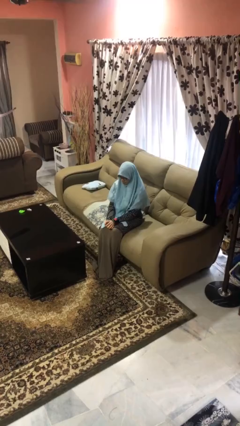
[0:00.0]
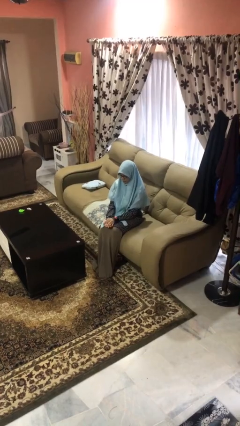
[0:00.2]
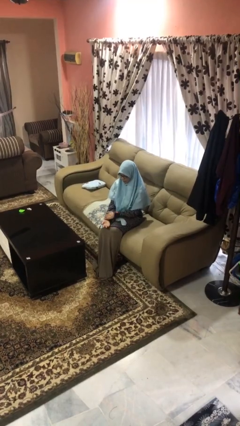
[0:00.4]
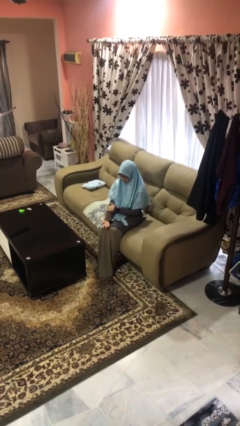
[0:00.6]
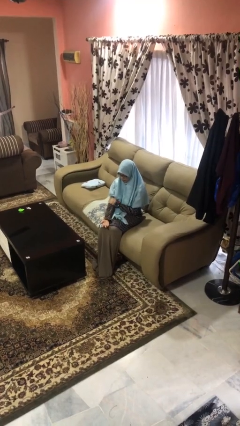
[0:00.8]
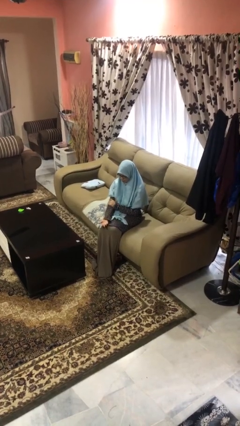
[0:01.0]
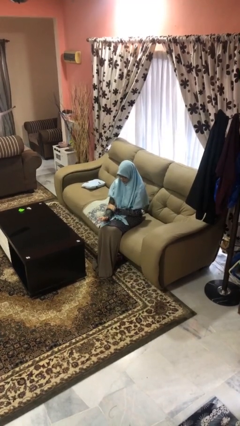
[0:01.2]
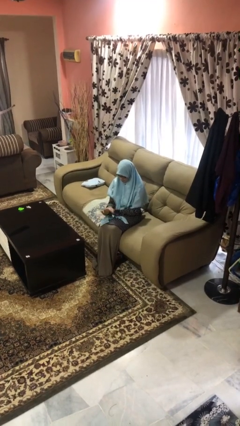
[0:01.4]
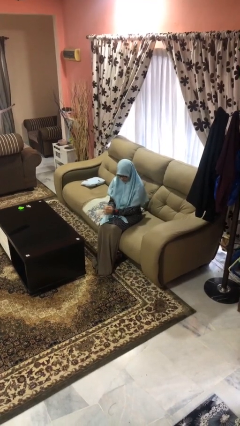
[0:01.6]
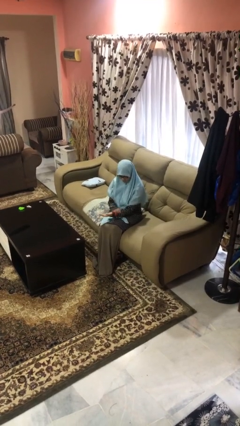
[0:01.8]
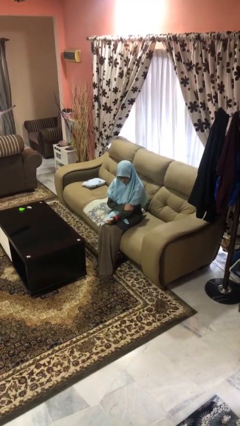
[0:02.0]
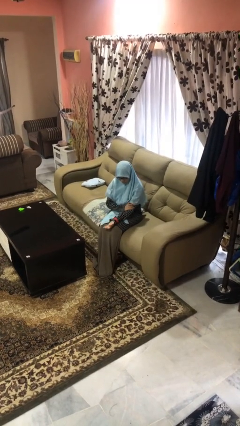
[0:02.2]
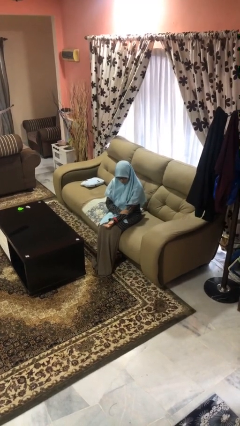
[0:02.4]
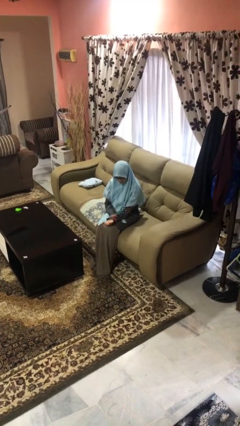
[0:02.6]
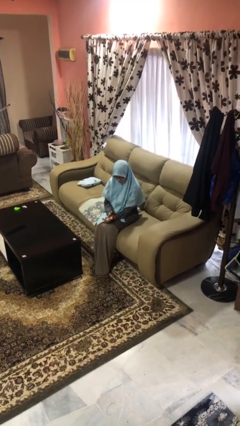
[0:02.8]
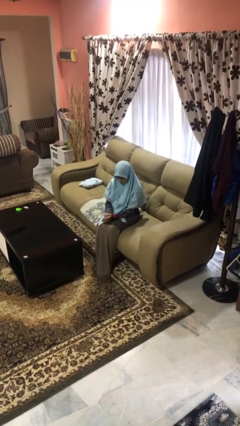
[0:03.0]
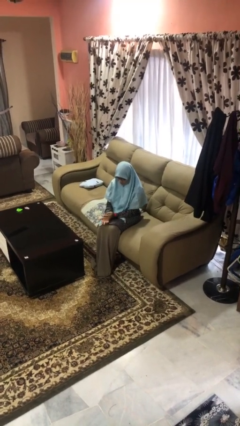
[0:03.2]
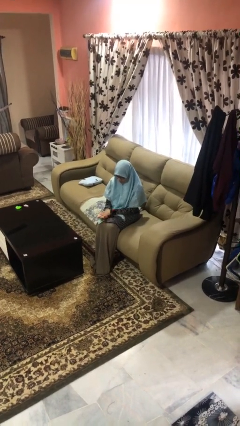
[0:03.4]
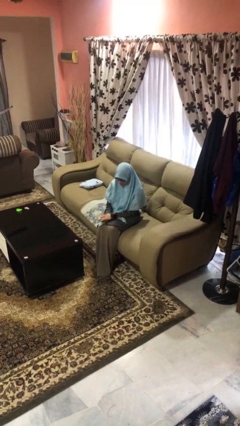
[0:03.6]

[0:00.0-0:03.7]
person looks at hands in lap

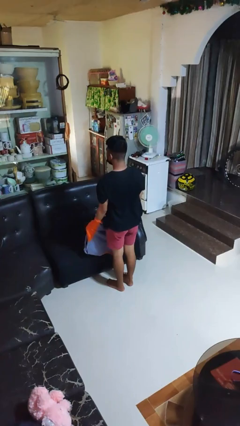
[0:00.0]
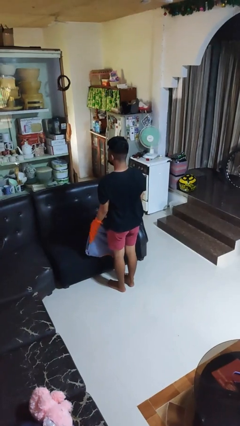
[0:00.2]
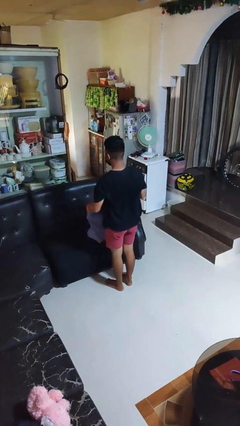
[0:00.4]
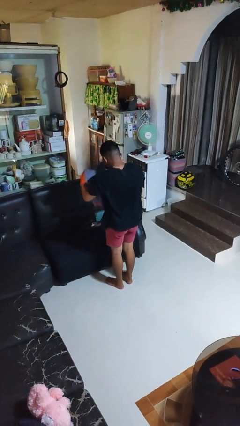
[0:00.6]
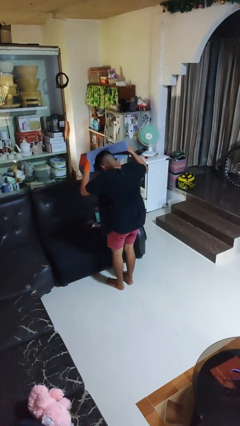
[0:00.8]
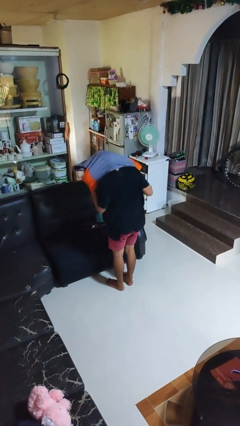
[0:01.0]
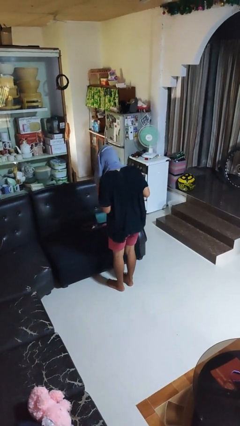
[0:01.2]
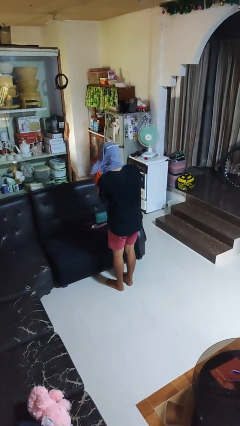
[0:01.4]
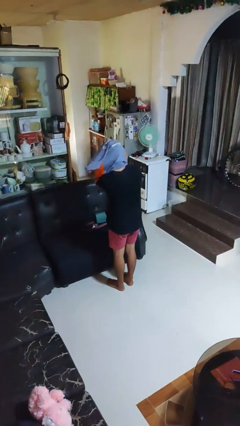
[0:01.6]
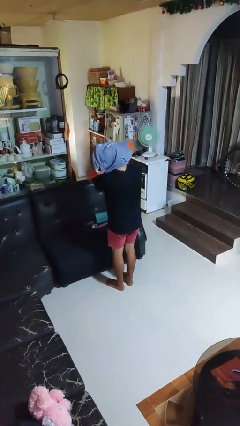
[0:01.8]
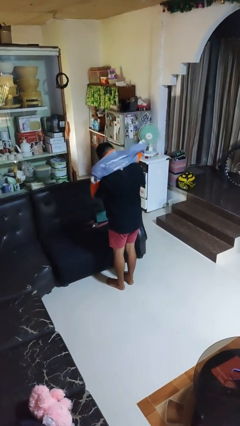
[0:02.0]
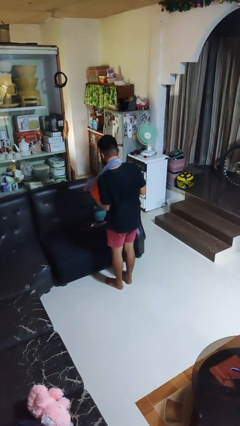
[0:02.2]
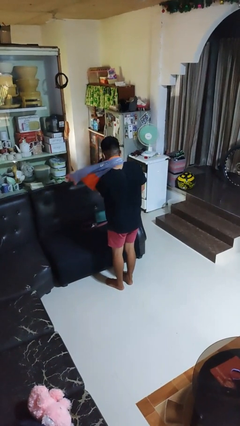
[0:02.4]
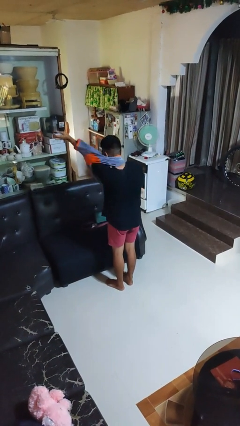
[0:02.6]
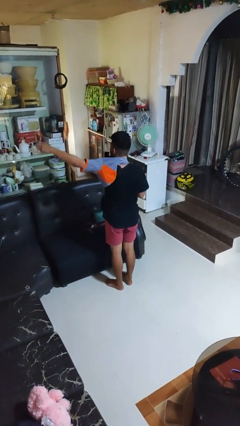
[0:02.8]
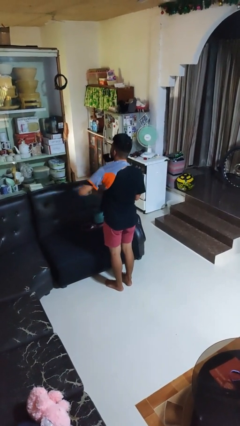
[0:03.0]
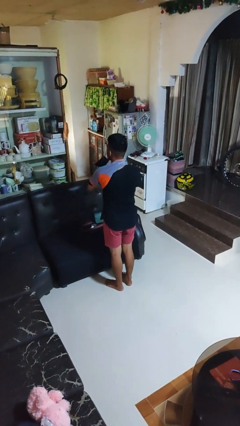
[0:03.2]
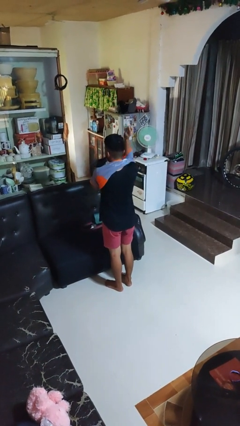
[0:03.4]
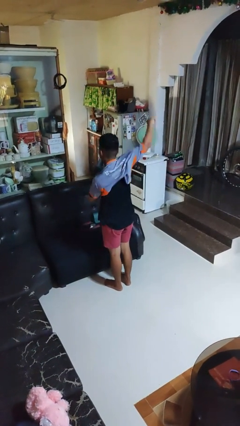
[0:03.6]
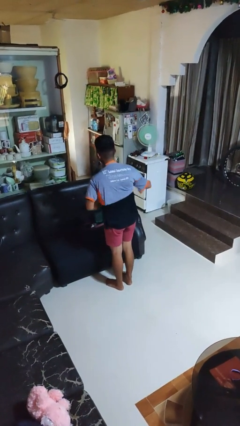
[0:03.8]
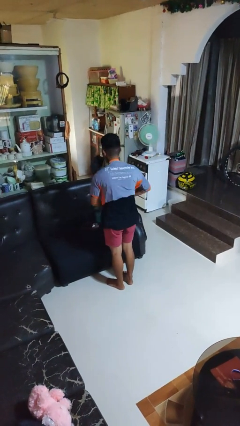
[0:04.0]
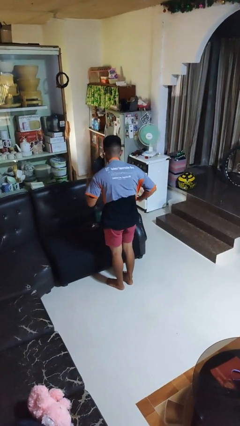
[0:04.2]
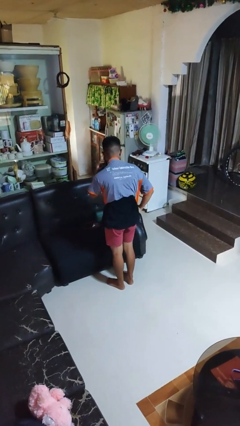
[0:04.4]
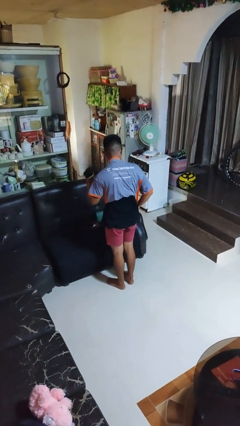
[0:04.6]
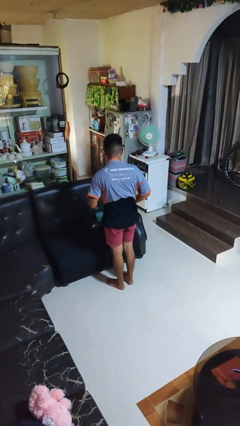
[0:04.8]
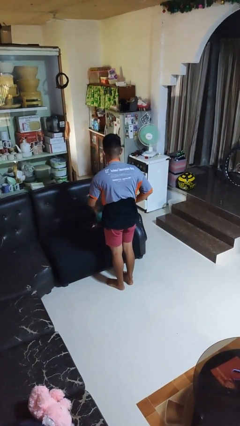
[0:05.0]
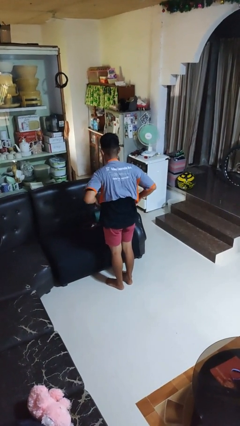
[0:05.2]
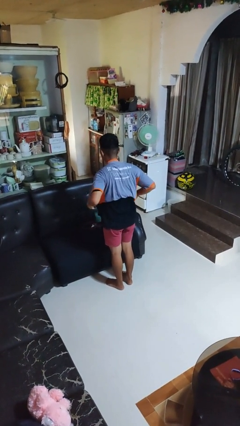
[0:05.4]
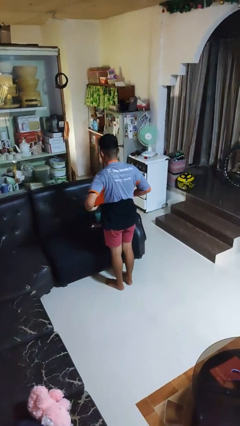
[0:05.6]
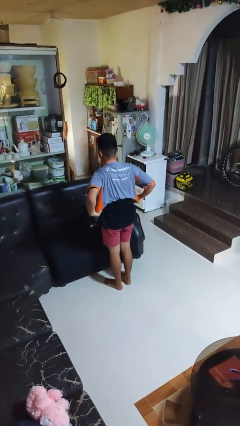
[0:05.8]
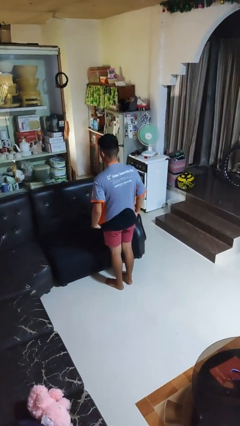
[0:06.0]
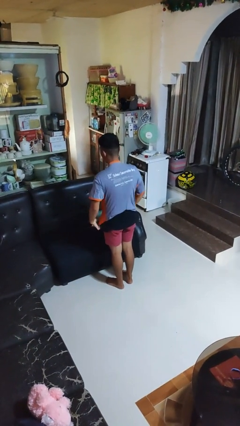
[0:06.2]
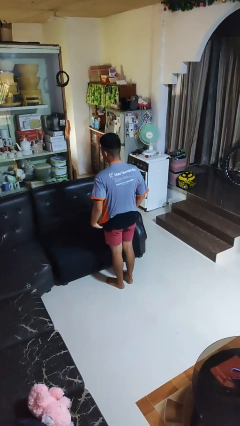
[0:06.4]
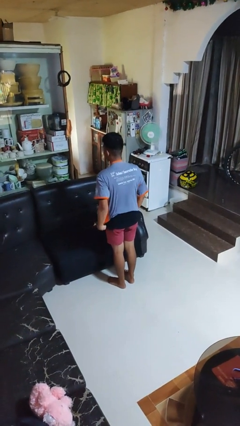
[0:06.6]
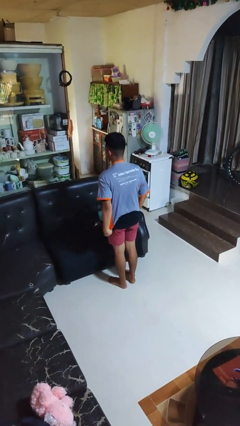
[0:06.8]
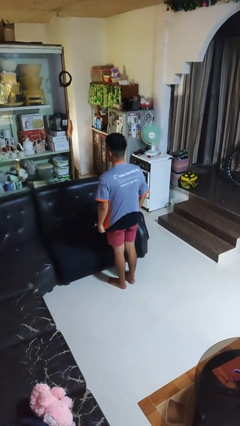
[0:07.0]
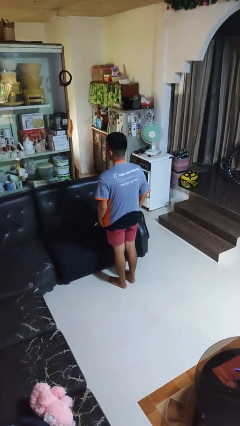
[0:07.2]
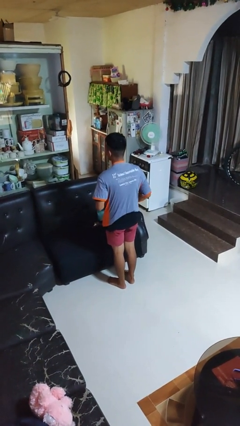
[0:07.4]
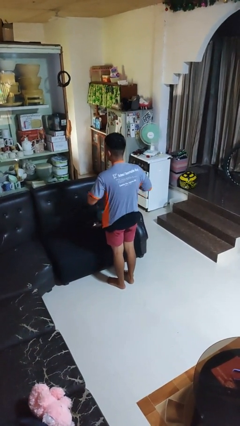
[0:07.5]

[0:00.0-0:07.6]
person puts on shirt

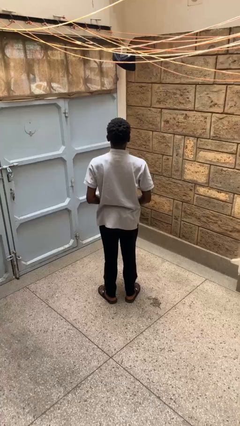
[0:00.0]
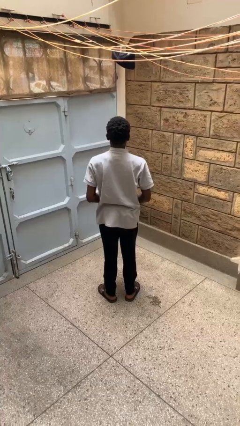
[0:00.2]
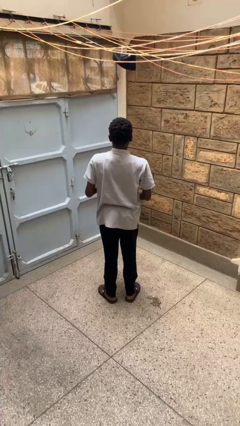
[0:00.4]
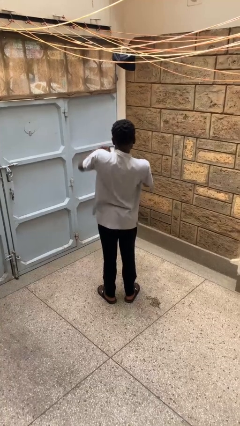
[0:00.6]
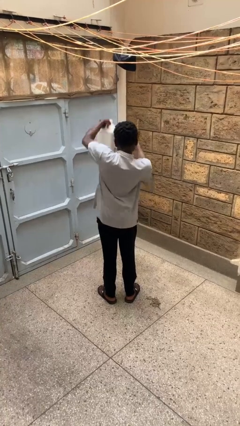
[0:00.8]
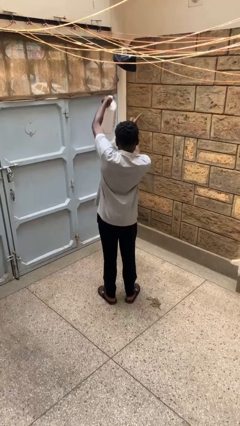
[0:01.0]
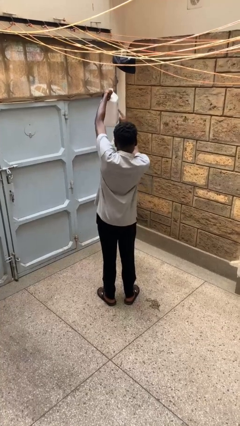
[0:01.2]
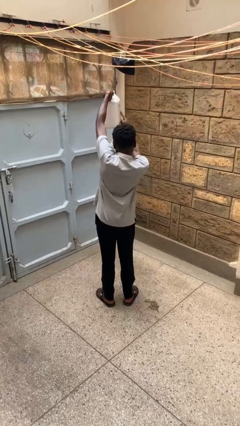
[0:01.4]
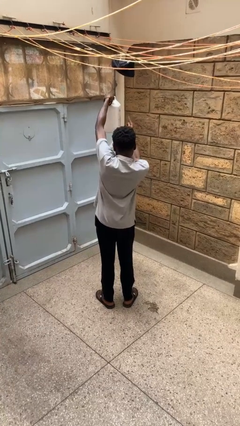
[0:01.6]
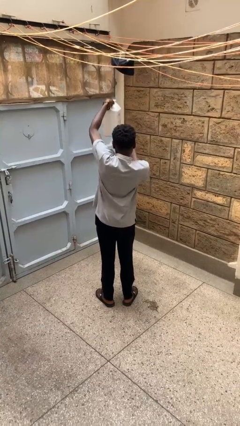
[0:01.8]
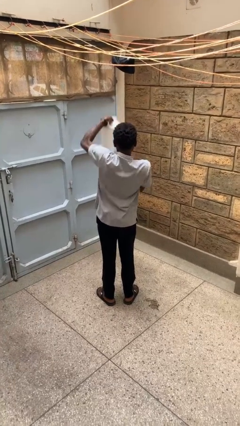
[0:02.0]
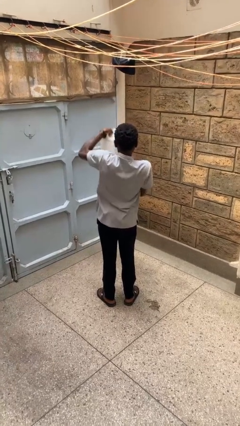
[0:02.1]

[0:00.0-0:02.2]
person taps object with finger

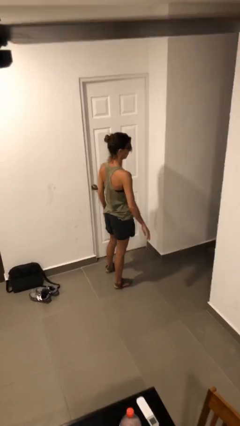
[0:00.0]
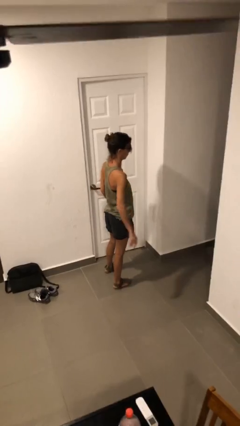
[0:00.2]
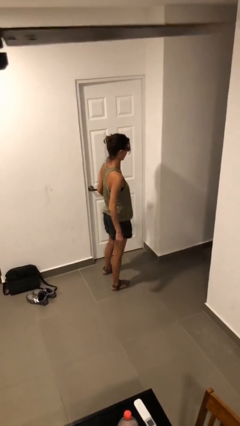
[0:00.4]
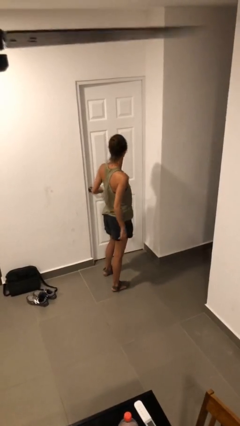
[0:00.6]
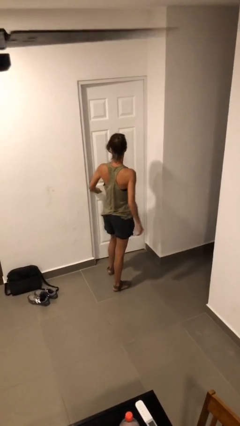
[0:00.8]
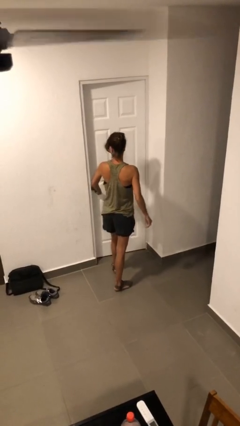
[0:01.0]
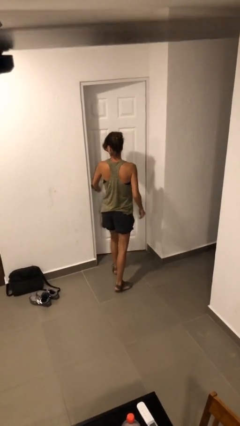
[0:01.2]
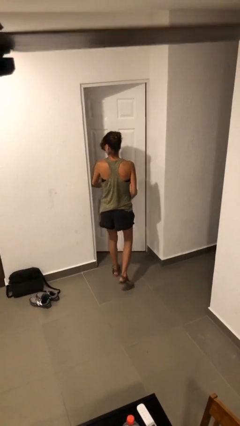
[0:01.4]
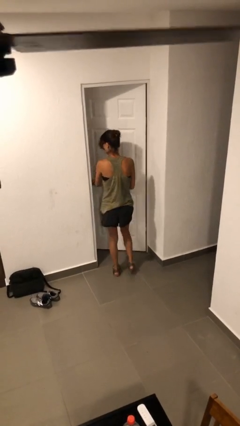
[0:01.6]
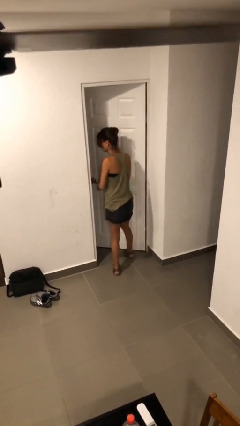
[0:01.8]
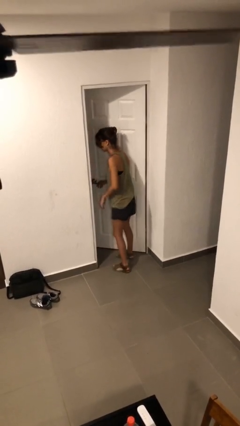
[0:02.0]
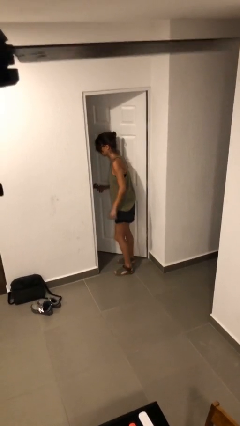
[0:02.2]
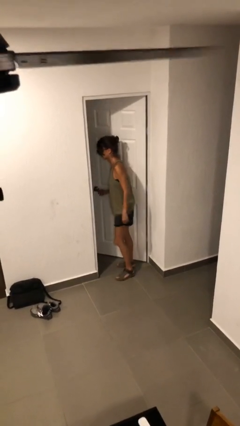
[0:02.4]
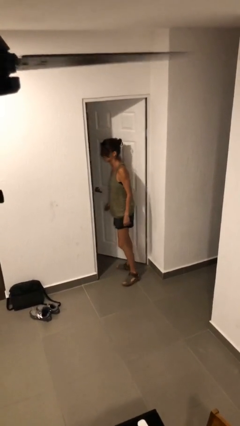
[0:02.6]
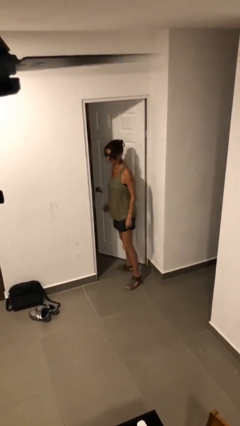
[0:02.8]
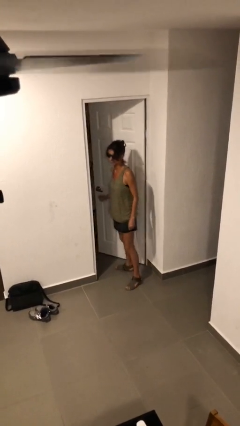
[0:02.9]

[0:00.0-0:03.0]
person opens facility door

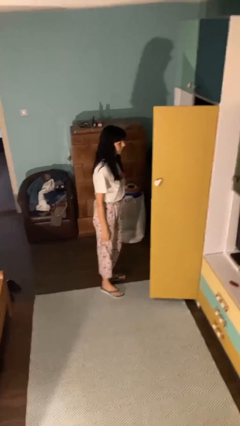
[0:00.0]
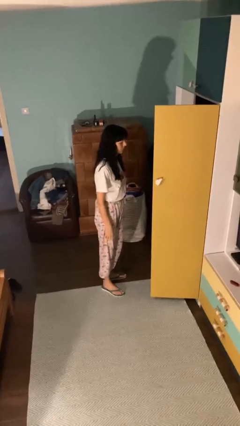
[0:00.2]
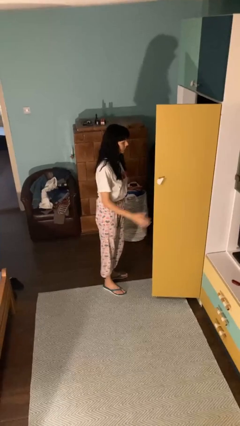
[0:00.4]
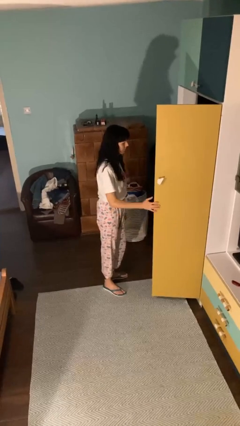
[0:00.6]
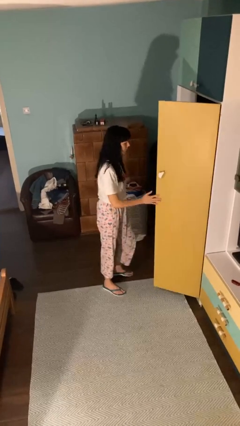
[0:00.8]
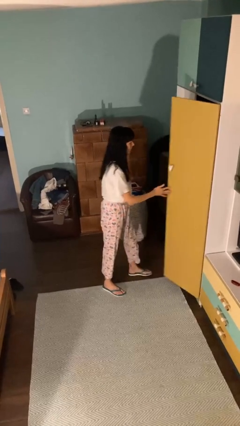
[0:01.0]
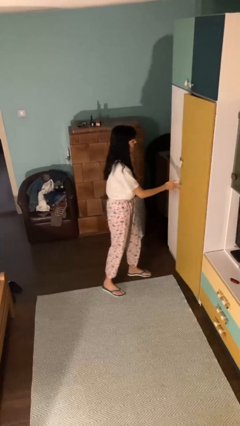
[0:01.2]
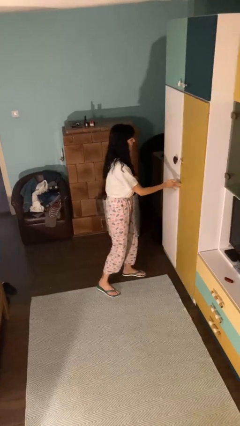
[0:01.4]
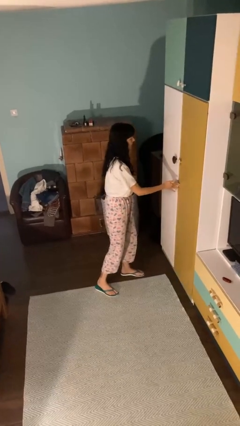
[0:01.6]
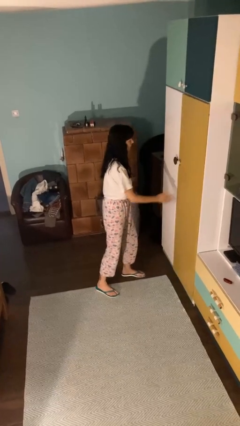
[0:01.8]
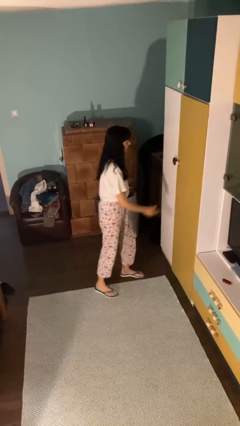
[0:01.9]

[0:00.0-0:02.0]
person closes closet door
